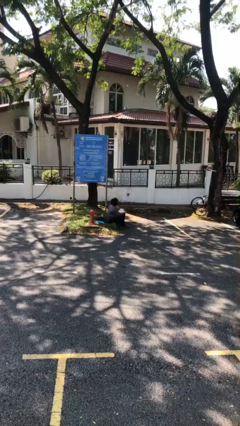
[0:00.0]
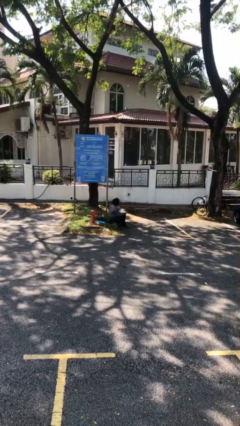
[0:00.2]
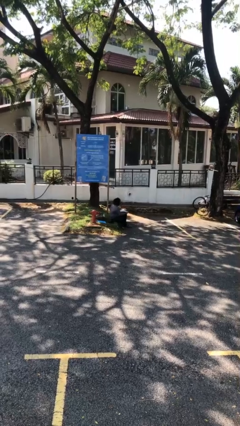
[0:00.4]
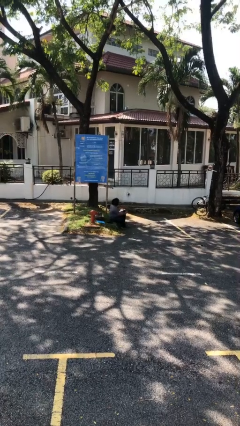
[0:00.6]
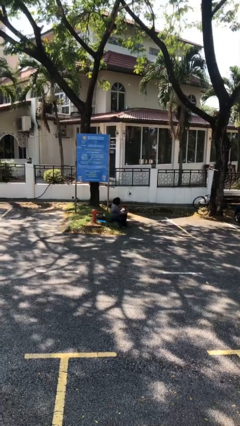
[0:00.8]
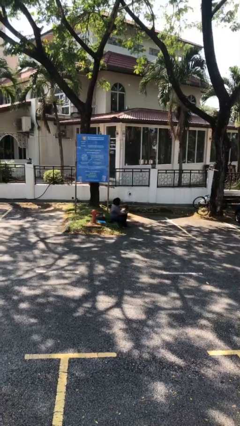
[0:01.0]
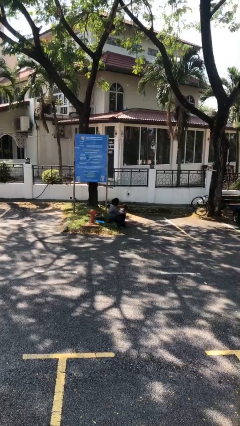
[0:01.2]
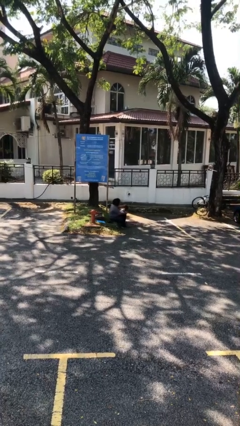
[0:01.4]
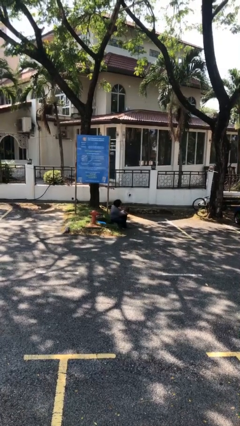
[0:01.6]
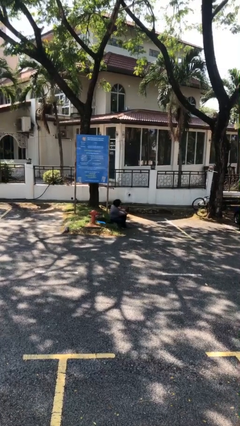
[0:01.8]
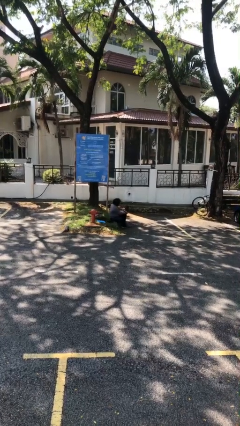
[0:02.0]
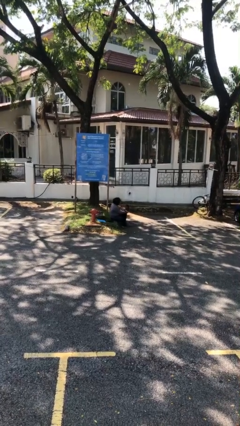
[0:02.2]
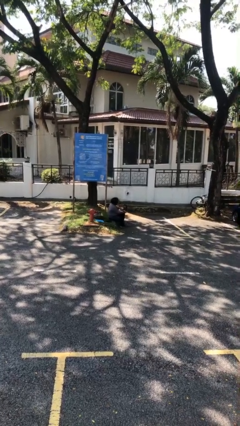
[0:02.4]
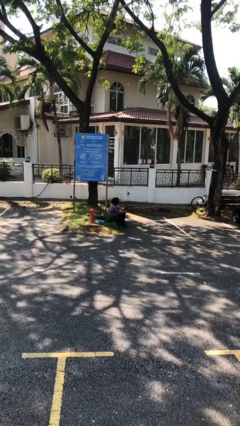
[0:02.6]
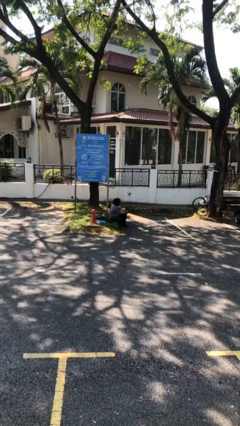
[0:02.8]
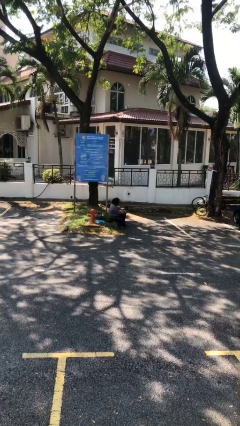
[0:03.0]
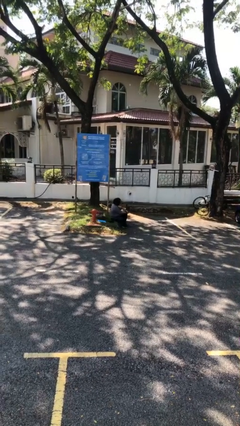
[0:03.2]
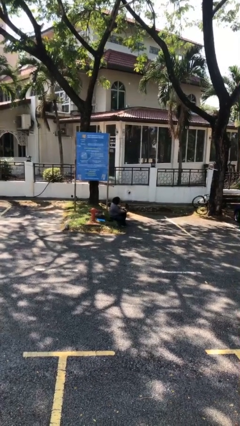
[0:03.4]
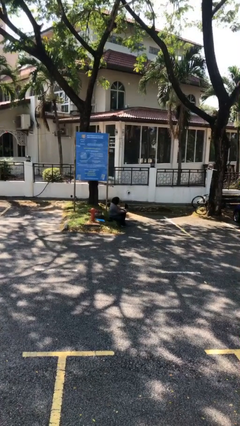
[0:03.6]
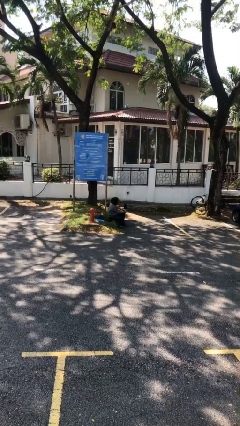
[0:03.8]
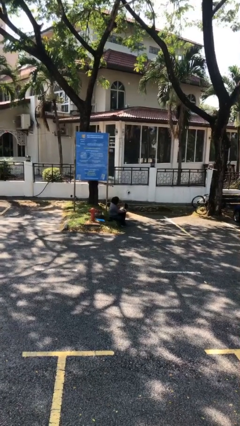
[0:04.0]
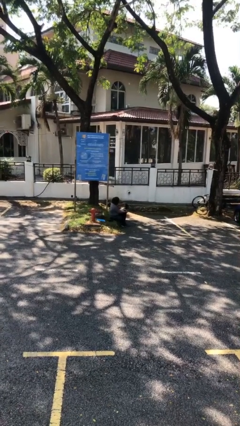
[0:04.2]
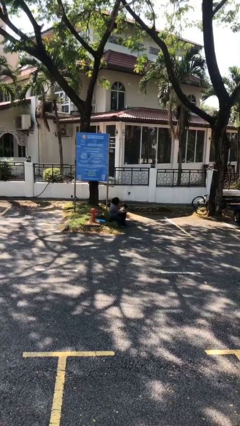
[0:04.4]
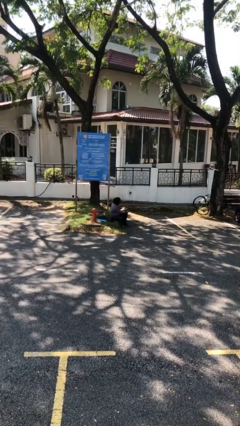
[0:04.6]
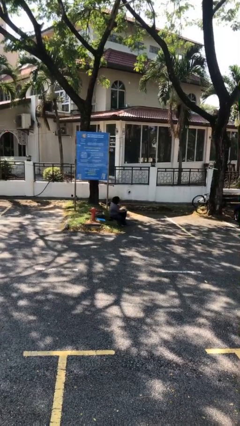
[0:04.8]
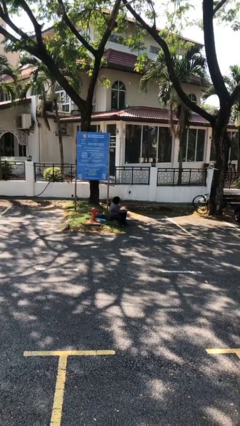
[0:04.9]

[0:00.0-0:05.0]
person interacts with laptop

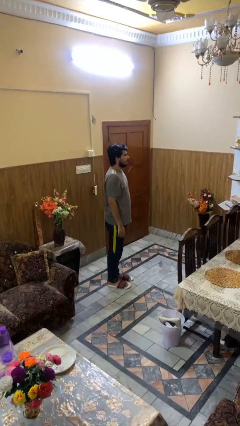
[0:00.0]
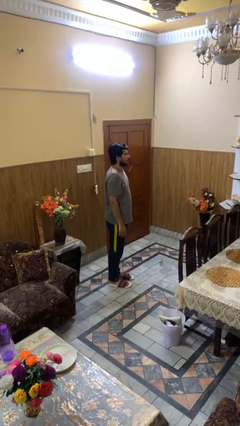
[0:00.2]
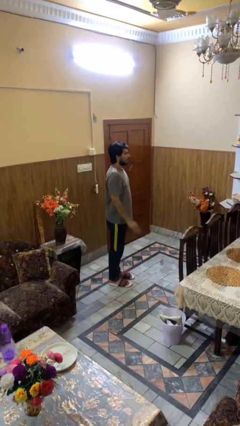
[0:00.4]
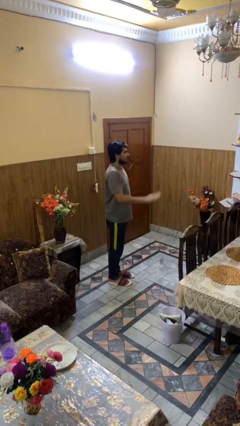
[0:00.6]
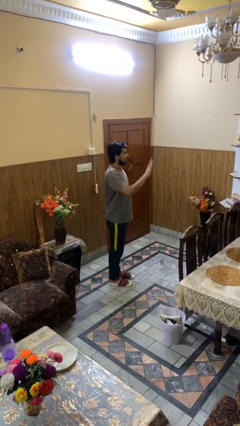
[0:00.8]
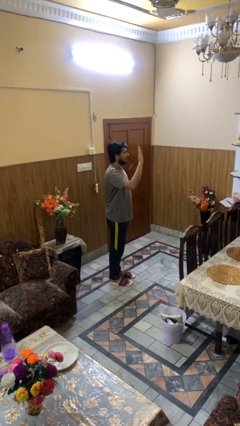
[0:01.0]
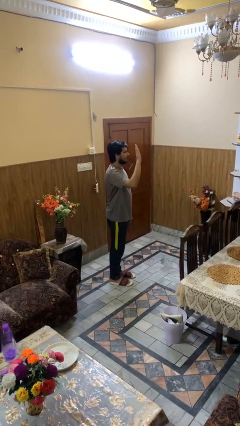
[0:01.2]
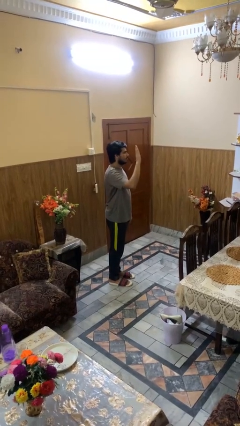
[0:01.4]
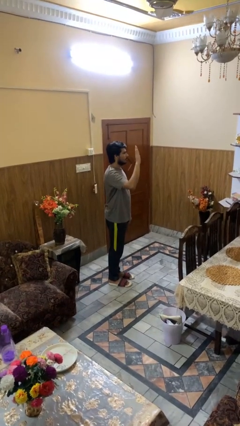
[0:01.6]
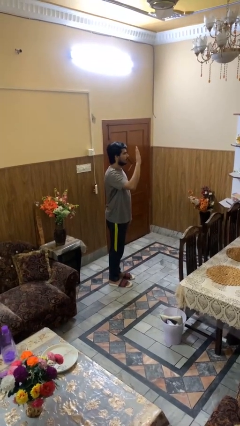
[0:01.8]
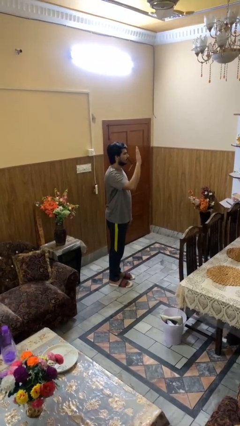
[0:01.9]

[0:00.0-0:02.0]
person gestures raise hand

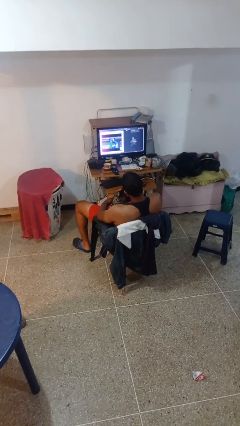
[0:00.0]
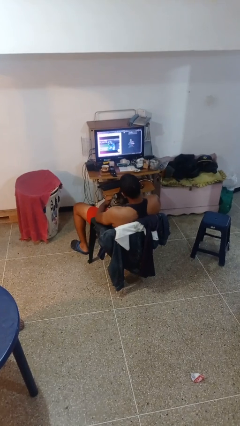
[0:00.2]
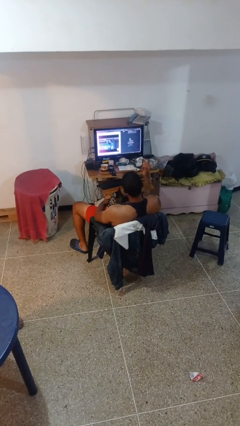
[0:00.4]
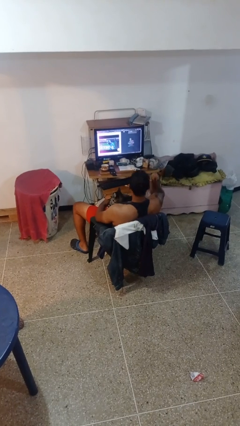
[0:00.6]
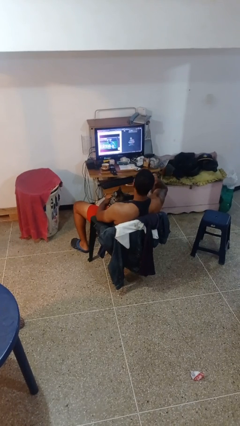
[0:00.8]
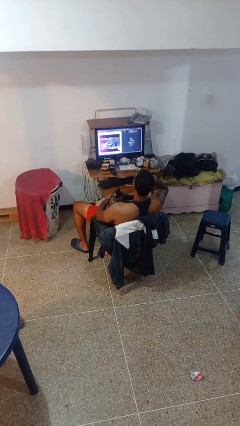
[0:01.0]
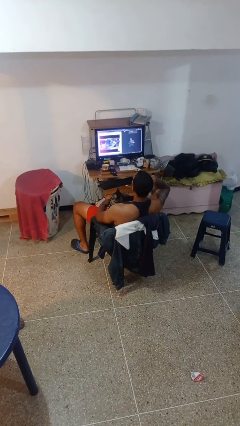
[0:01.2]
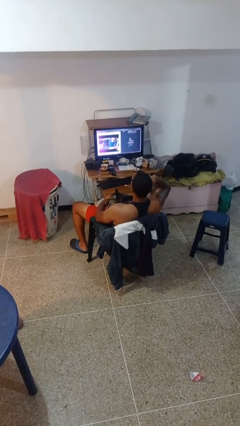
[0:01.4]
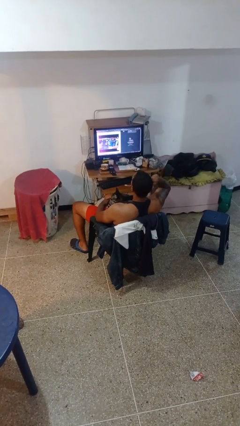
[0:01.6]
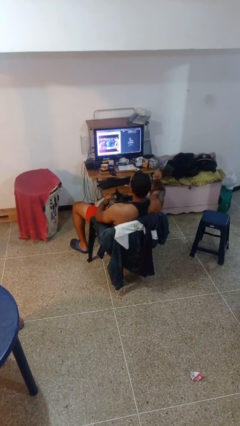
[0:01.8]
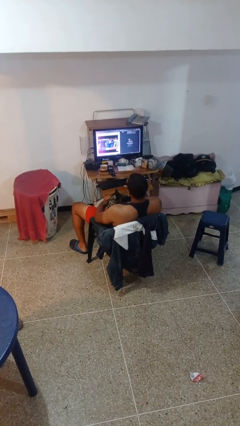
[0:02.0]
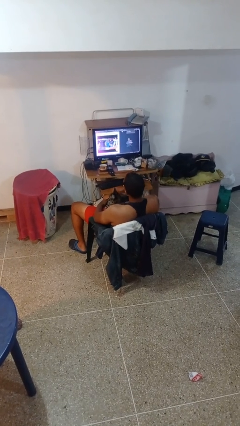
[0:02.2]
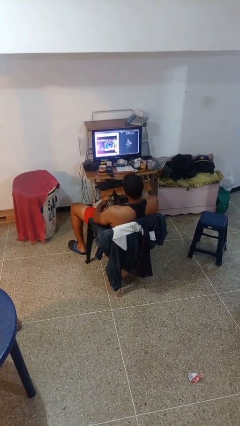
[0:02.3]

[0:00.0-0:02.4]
person gestures listen closely

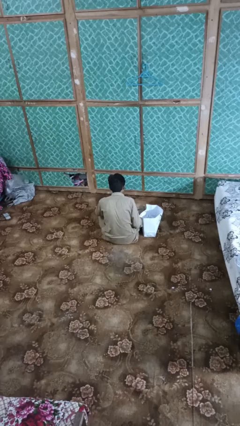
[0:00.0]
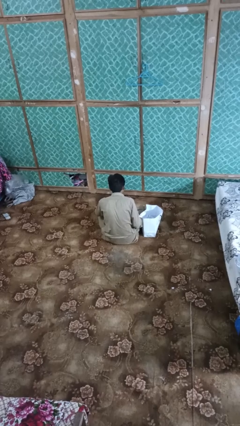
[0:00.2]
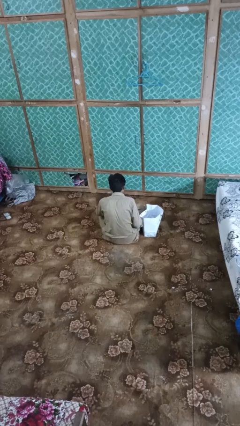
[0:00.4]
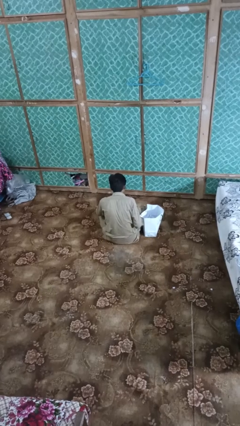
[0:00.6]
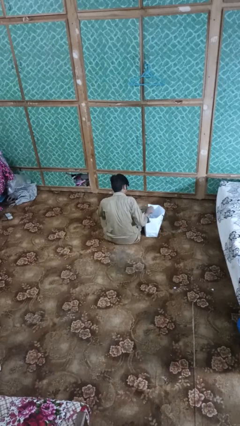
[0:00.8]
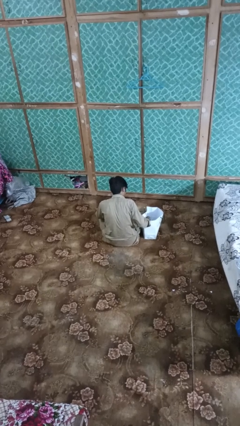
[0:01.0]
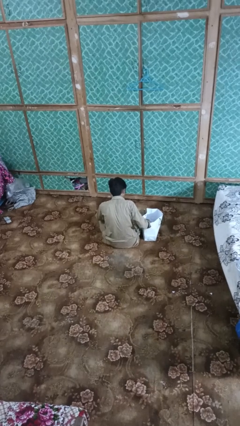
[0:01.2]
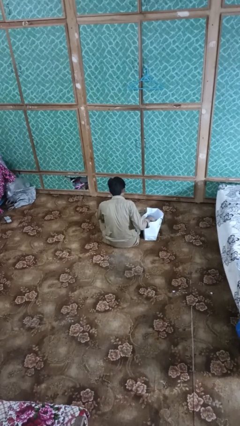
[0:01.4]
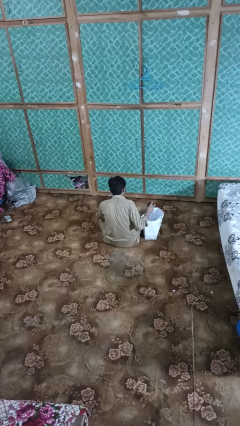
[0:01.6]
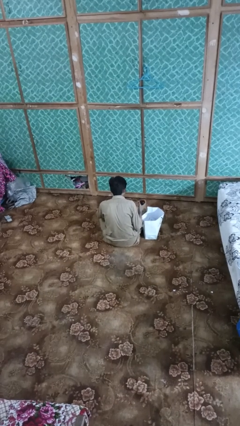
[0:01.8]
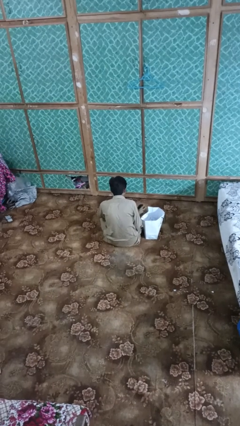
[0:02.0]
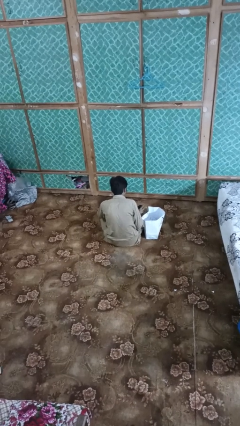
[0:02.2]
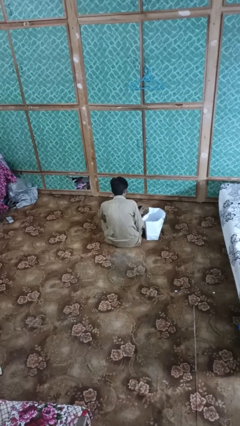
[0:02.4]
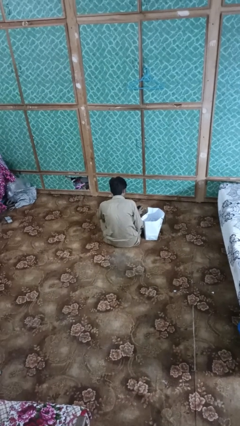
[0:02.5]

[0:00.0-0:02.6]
person takes object from bag

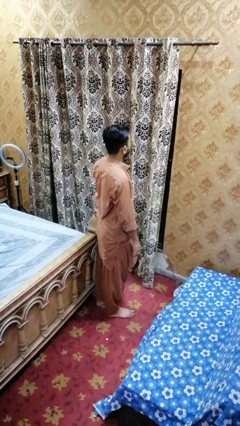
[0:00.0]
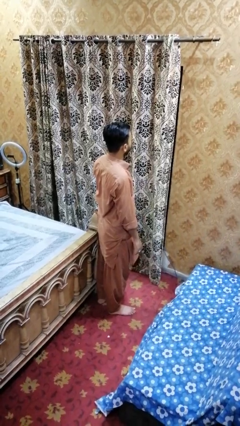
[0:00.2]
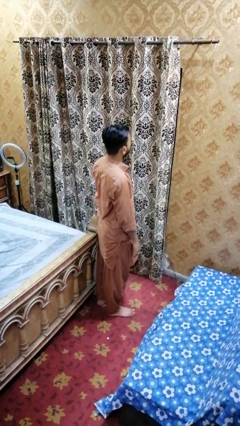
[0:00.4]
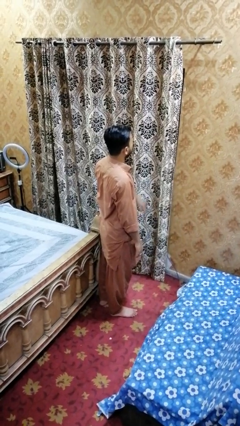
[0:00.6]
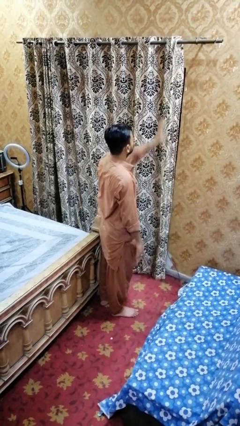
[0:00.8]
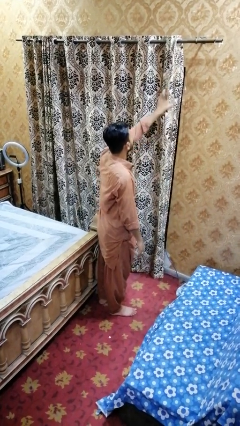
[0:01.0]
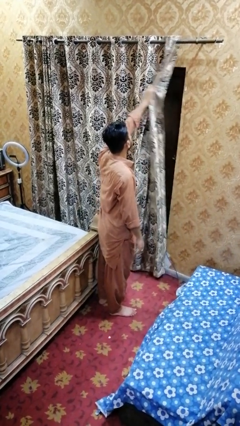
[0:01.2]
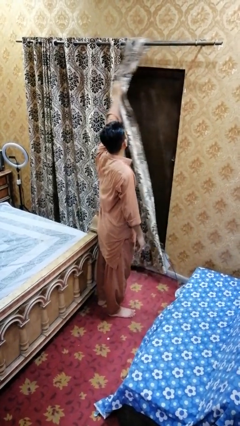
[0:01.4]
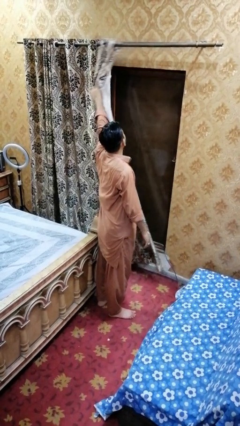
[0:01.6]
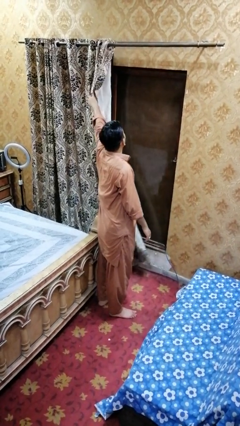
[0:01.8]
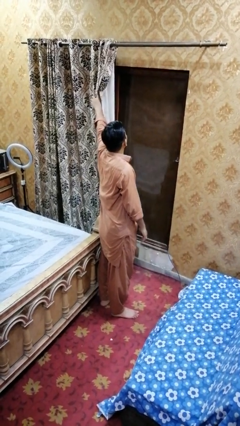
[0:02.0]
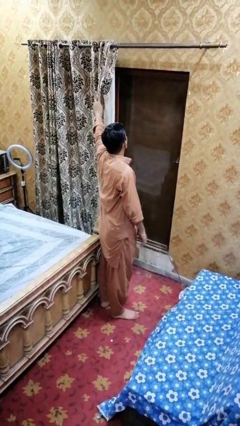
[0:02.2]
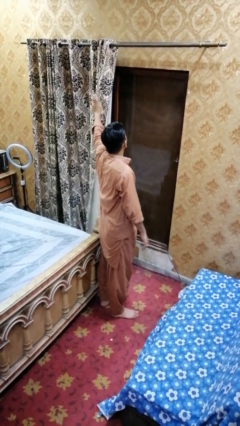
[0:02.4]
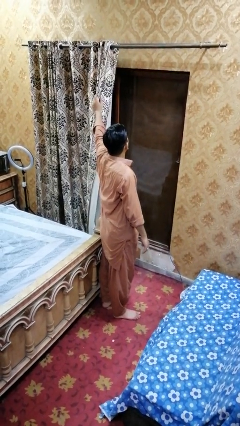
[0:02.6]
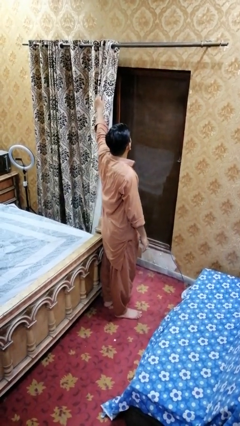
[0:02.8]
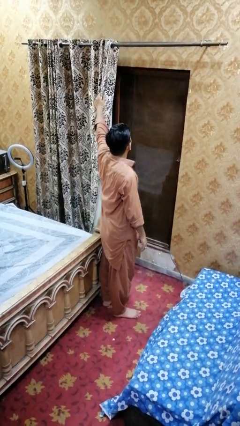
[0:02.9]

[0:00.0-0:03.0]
person opens curtains

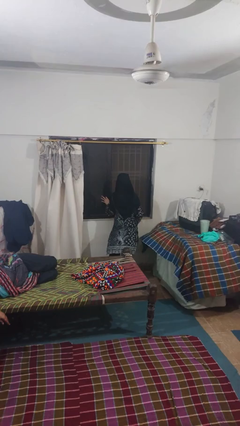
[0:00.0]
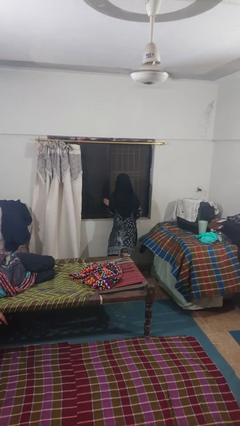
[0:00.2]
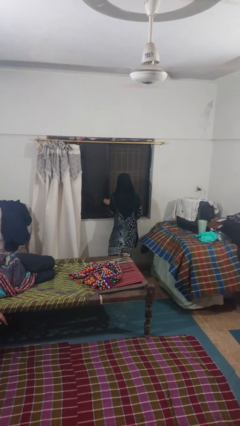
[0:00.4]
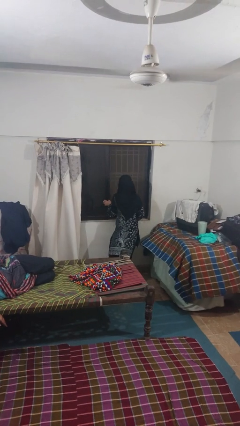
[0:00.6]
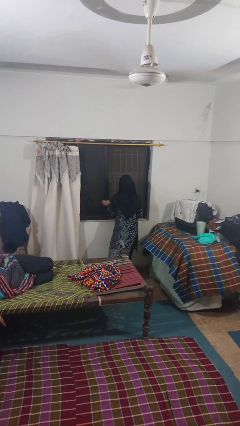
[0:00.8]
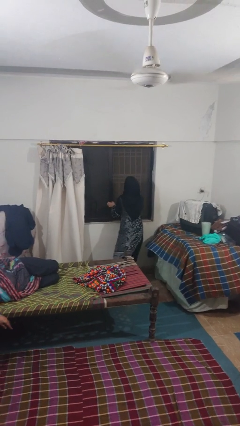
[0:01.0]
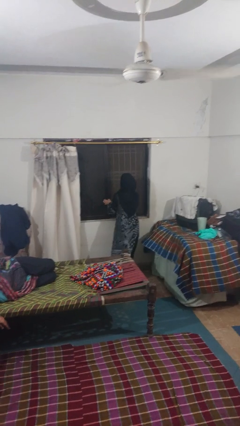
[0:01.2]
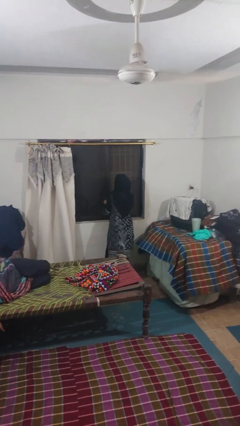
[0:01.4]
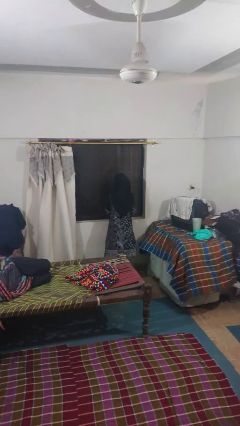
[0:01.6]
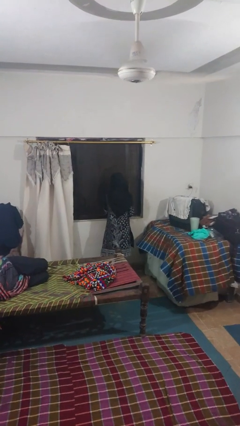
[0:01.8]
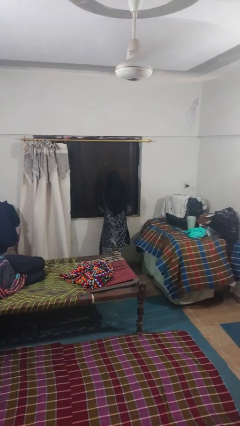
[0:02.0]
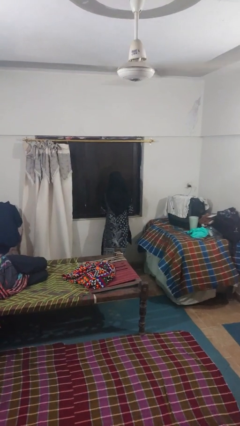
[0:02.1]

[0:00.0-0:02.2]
person closes sliding door
